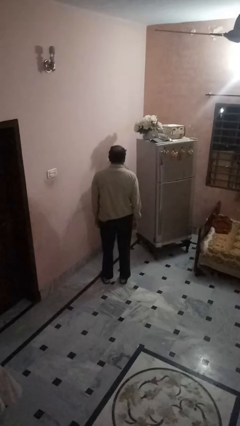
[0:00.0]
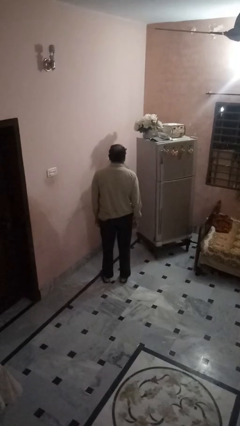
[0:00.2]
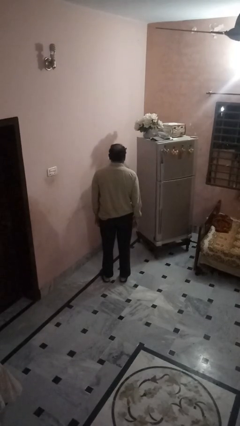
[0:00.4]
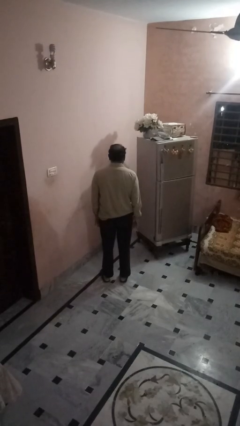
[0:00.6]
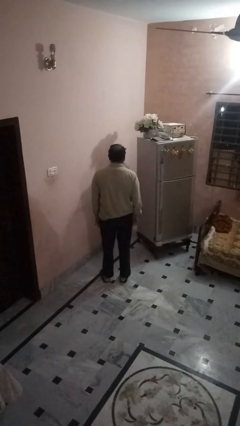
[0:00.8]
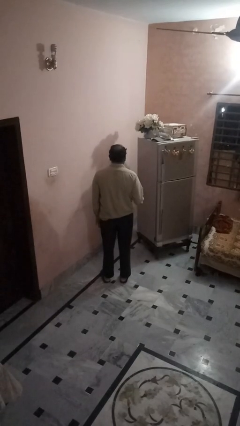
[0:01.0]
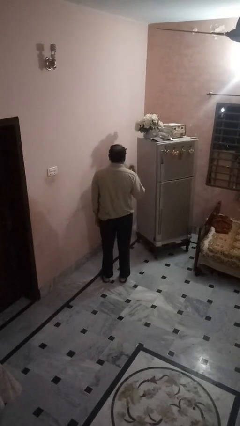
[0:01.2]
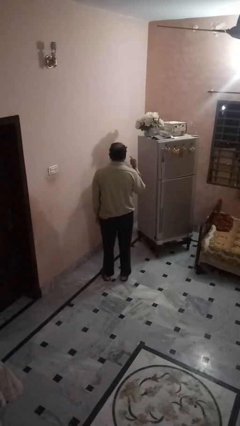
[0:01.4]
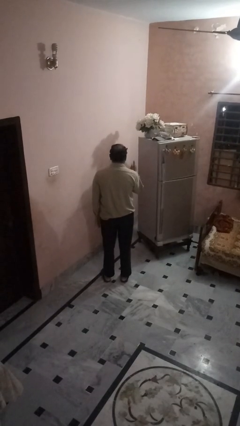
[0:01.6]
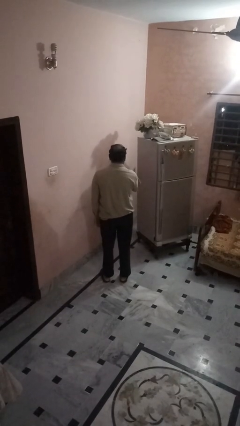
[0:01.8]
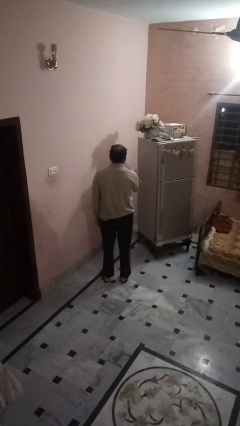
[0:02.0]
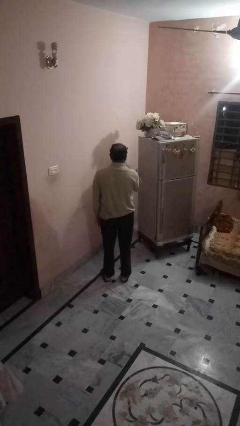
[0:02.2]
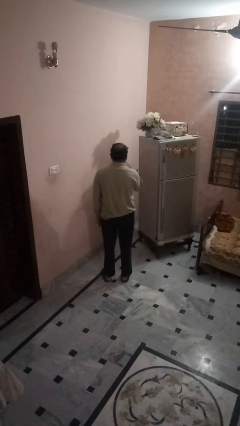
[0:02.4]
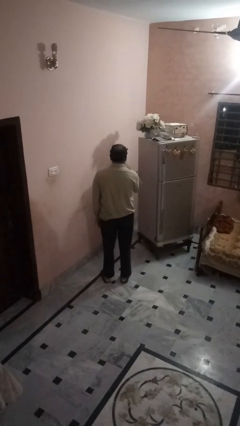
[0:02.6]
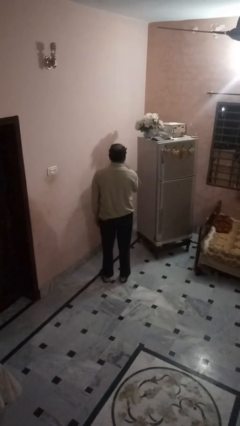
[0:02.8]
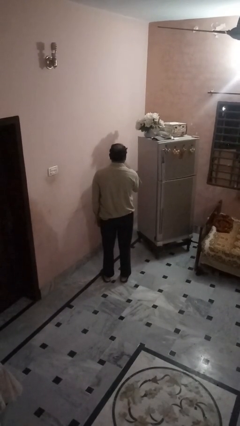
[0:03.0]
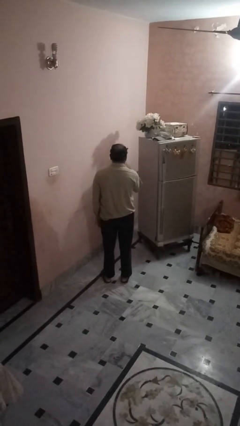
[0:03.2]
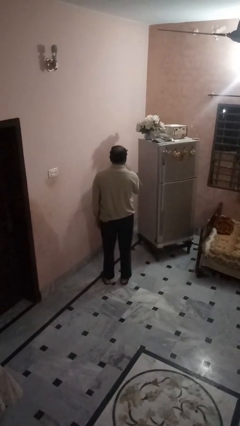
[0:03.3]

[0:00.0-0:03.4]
person gestures hang loose

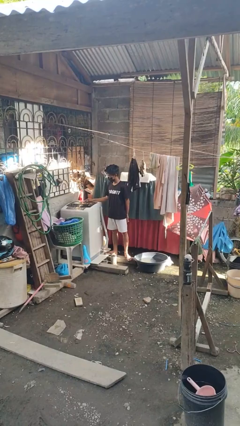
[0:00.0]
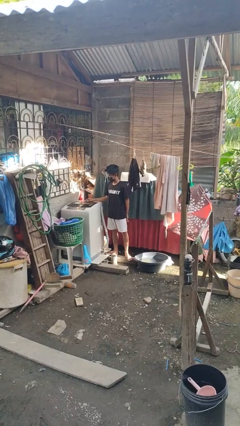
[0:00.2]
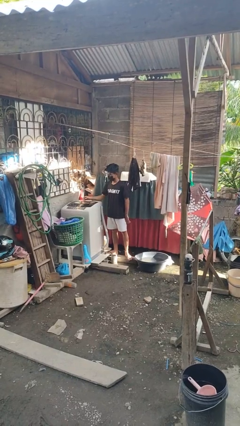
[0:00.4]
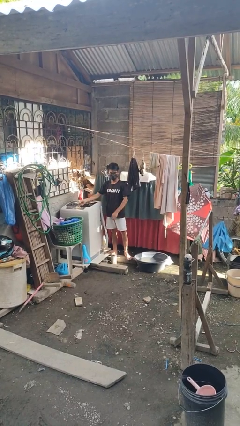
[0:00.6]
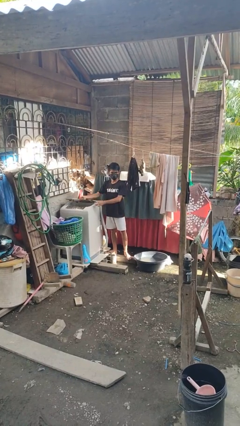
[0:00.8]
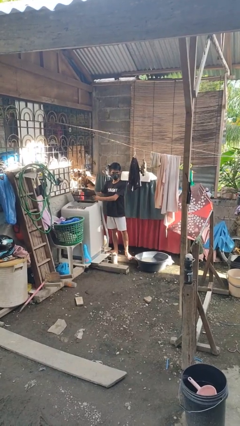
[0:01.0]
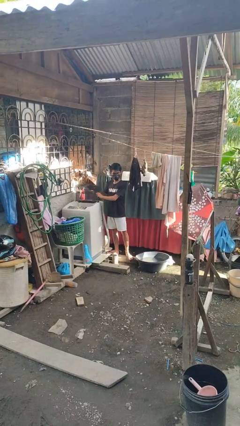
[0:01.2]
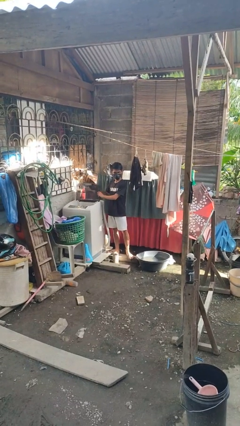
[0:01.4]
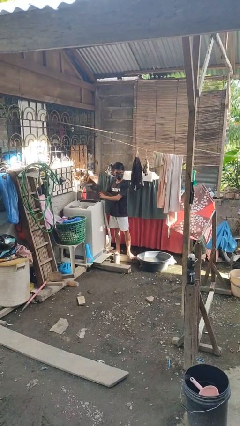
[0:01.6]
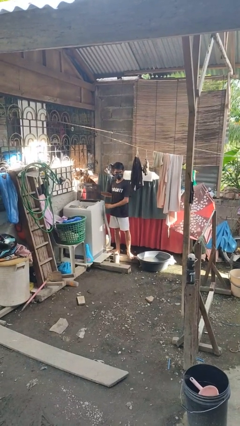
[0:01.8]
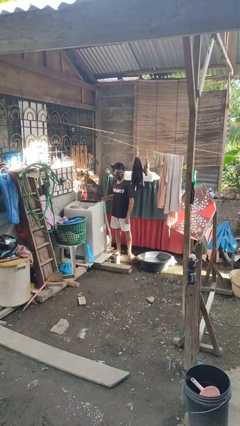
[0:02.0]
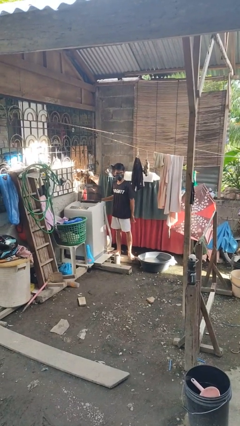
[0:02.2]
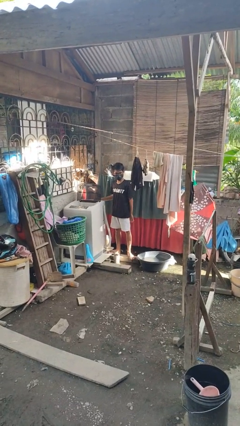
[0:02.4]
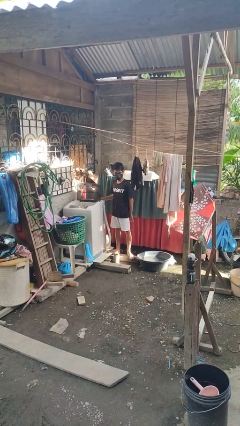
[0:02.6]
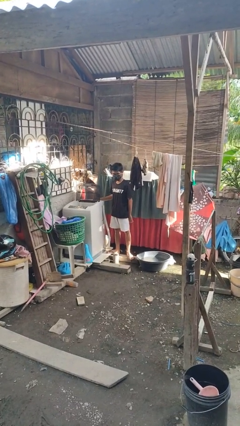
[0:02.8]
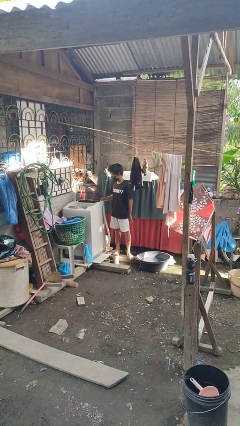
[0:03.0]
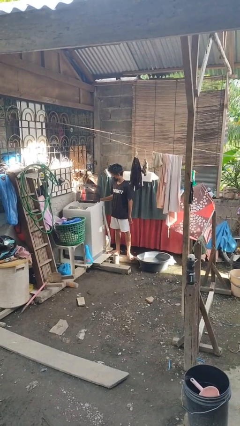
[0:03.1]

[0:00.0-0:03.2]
person opens clothes washer

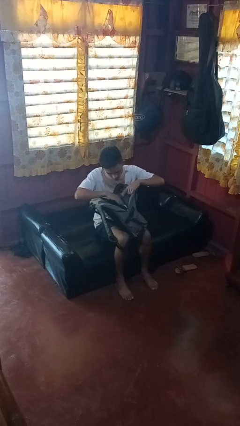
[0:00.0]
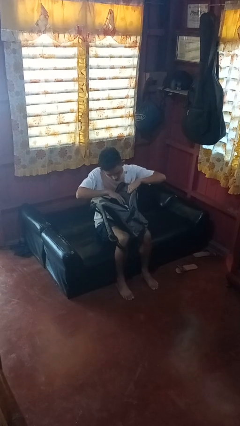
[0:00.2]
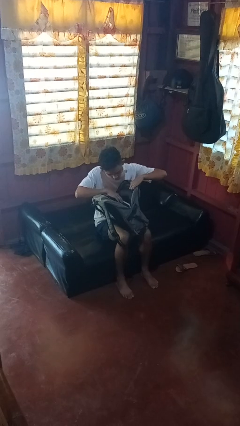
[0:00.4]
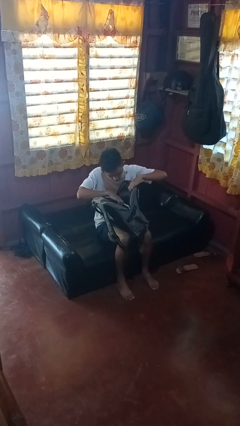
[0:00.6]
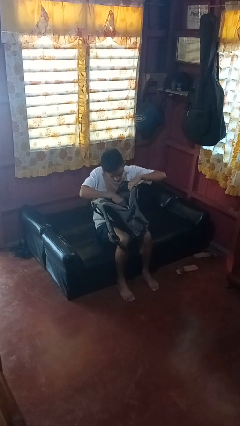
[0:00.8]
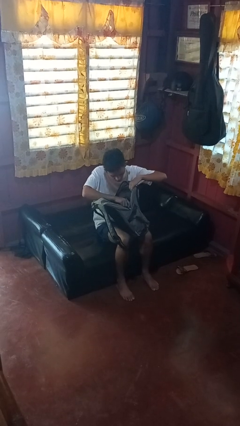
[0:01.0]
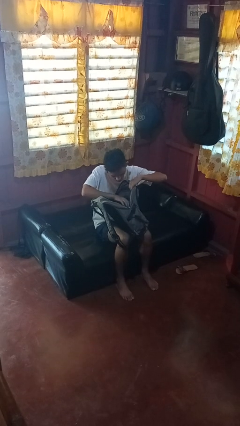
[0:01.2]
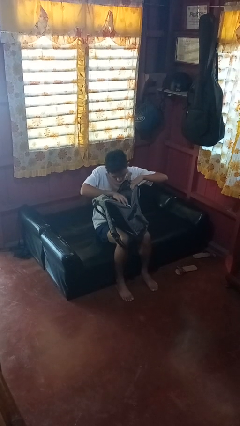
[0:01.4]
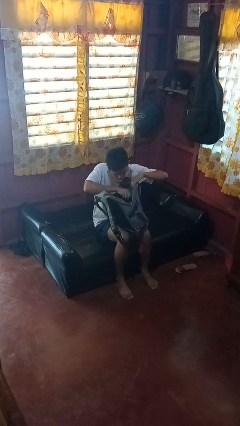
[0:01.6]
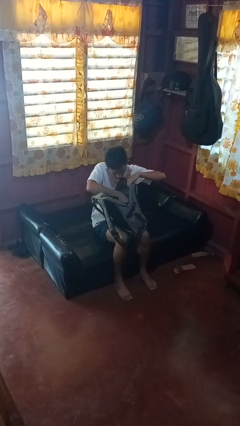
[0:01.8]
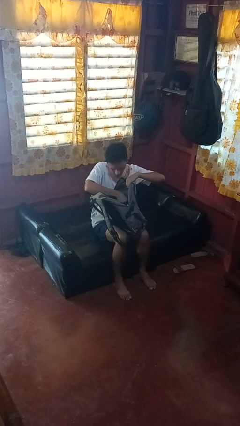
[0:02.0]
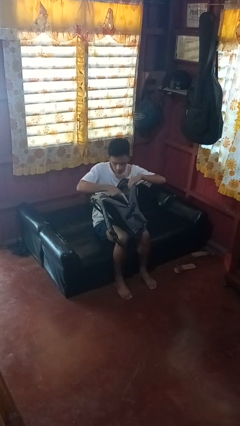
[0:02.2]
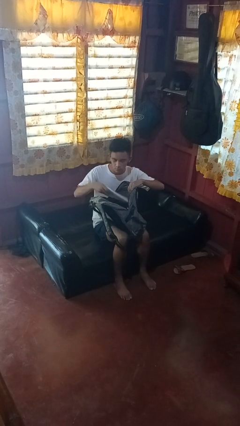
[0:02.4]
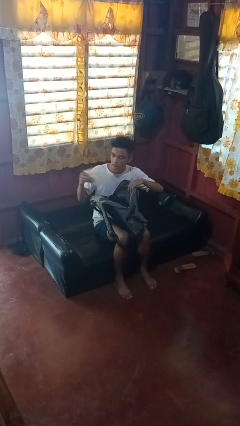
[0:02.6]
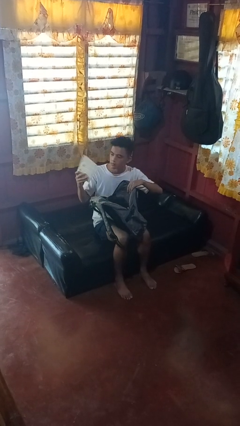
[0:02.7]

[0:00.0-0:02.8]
person searches in backpack

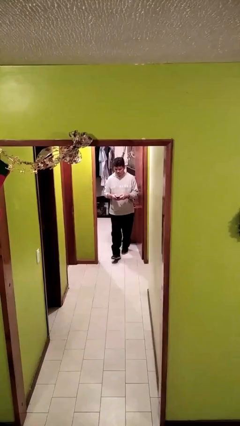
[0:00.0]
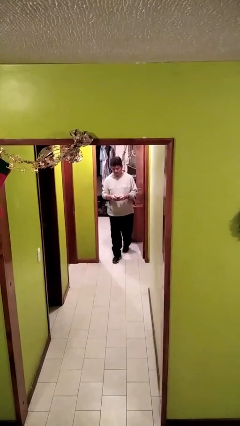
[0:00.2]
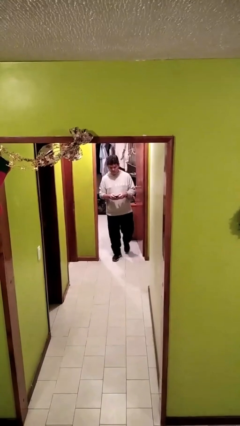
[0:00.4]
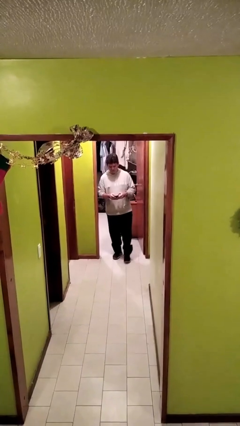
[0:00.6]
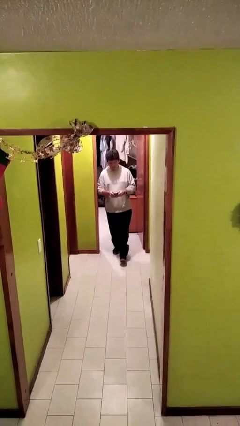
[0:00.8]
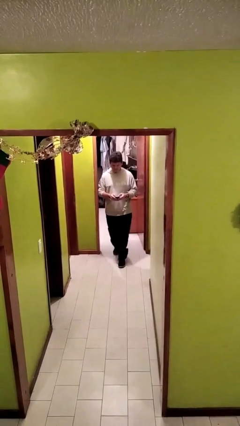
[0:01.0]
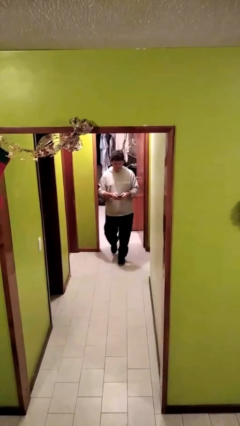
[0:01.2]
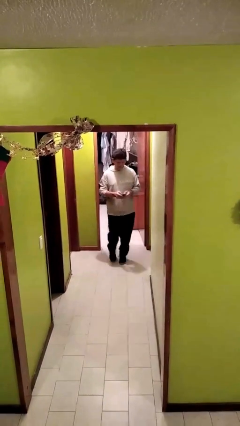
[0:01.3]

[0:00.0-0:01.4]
person enters scene through structure

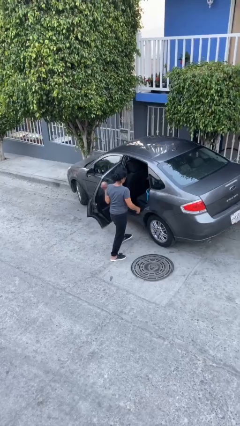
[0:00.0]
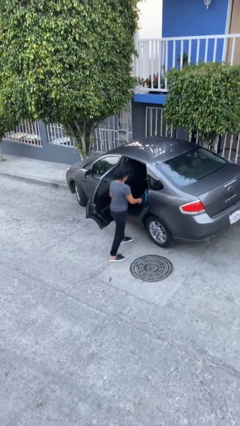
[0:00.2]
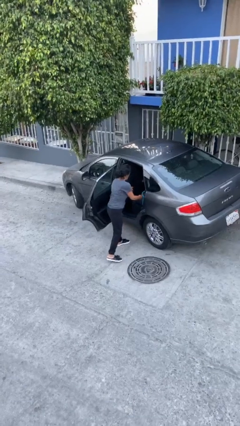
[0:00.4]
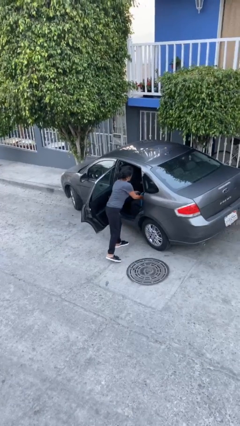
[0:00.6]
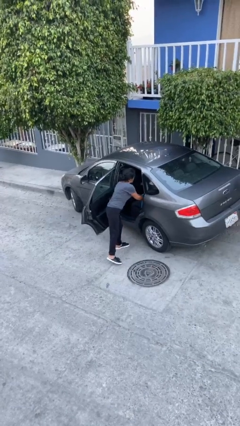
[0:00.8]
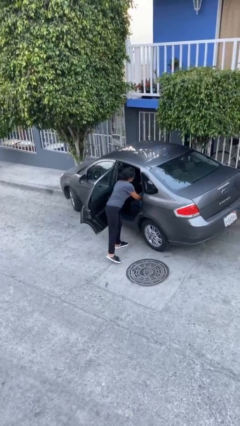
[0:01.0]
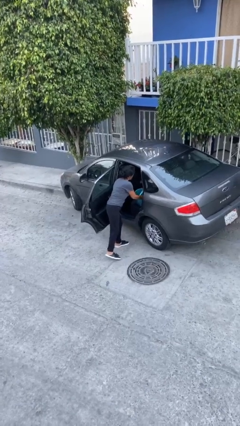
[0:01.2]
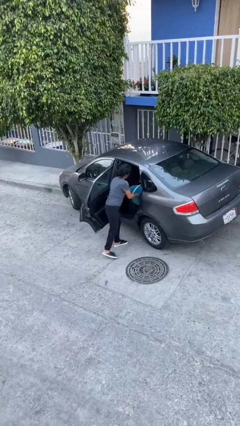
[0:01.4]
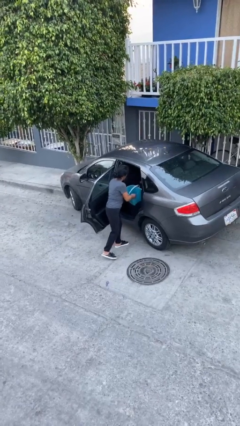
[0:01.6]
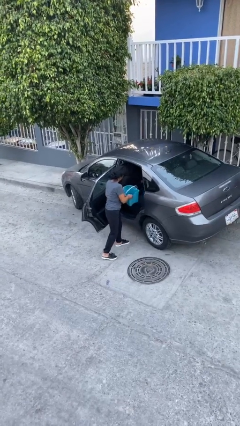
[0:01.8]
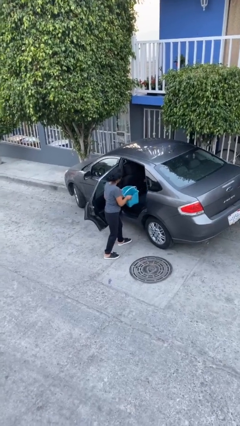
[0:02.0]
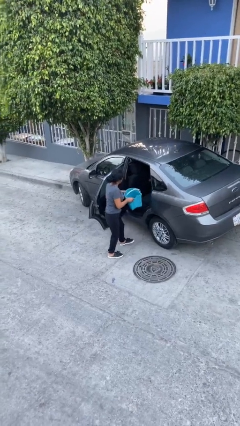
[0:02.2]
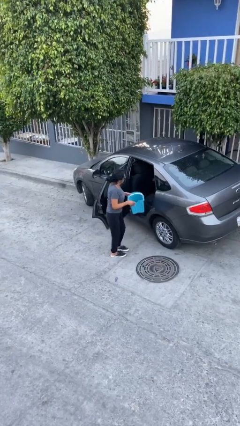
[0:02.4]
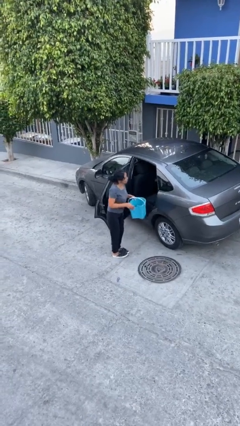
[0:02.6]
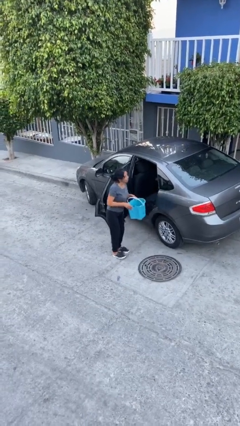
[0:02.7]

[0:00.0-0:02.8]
person unloads car

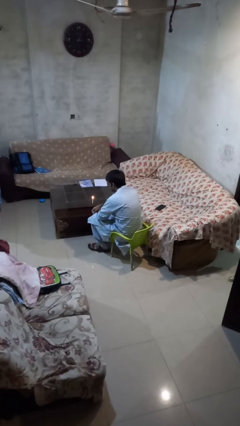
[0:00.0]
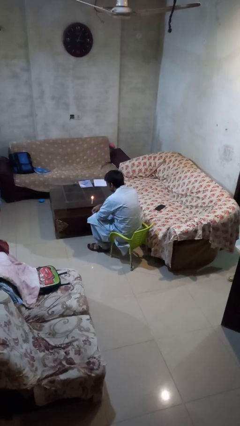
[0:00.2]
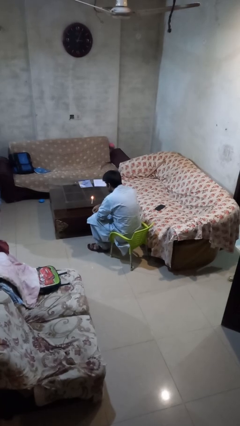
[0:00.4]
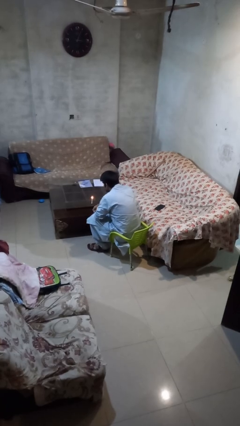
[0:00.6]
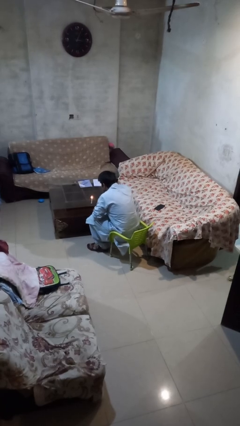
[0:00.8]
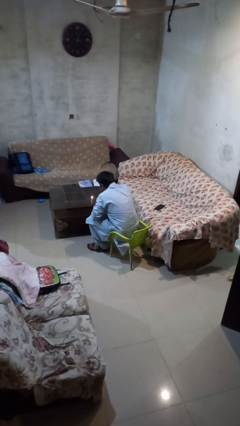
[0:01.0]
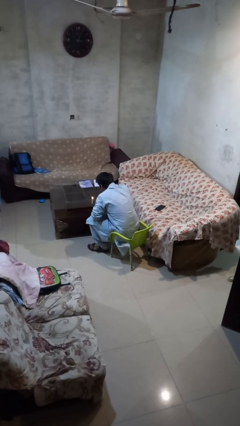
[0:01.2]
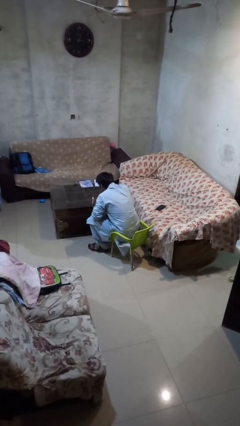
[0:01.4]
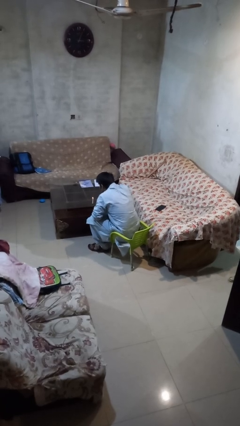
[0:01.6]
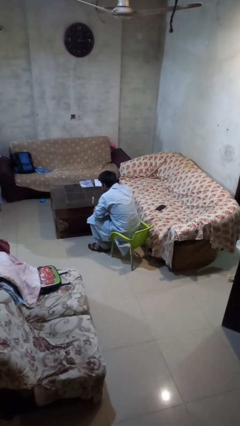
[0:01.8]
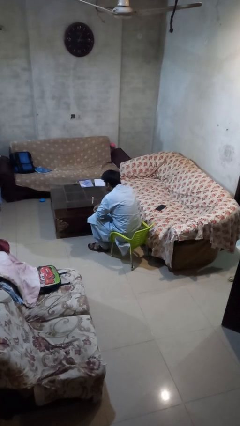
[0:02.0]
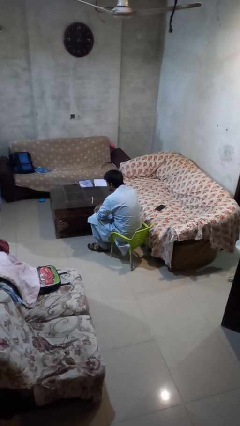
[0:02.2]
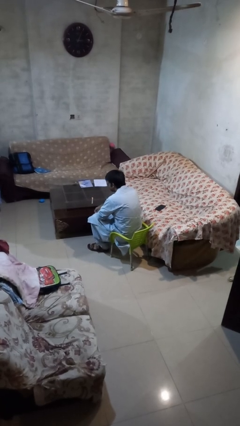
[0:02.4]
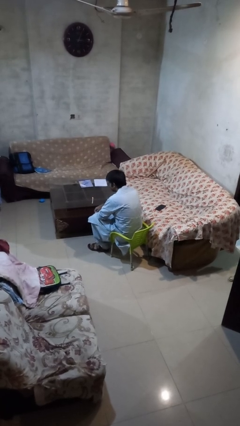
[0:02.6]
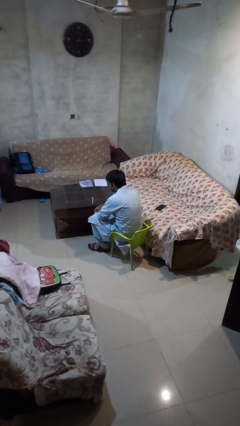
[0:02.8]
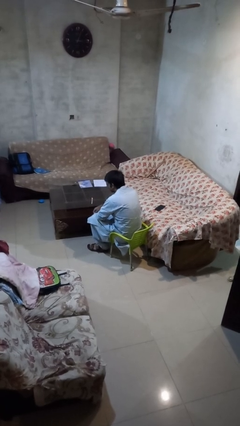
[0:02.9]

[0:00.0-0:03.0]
person extinguishes candle

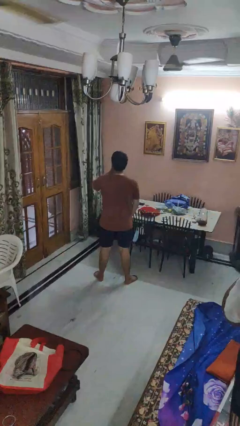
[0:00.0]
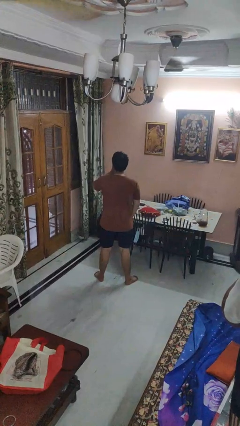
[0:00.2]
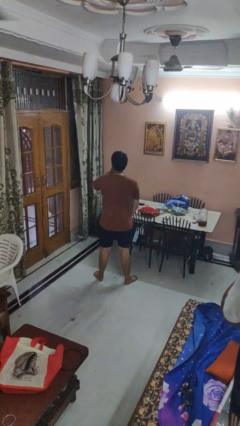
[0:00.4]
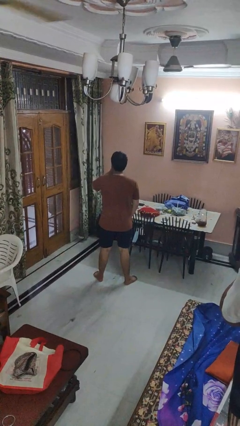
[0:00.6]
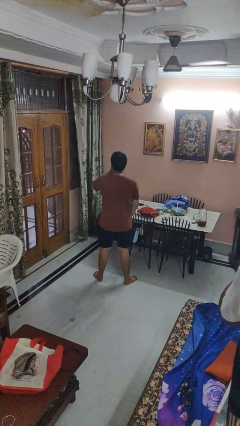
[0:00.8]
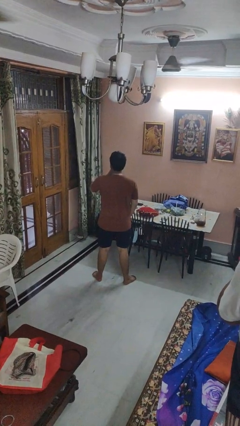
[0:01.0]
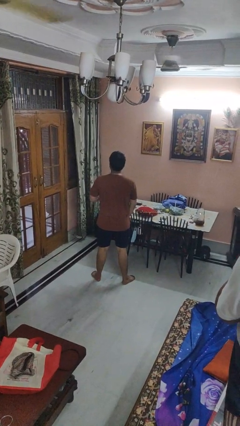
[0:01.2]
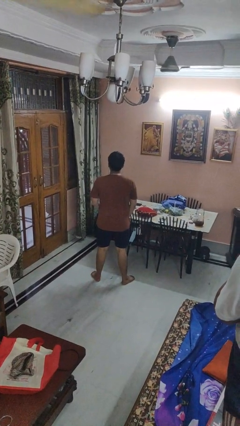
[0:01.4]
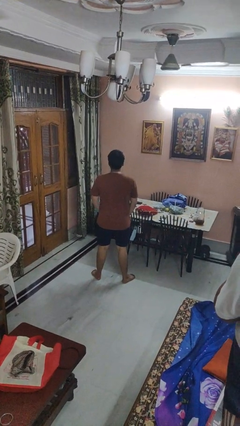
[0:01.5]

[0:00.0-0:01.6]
person gestures be quiet
